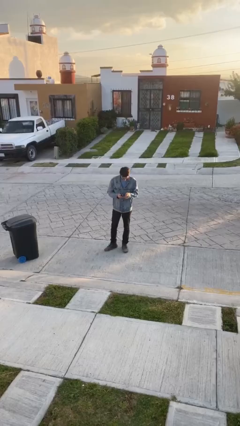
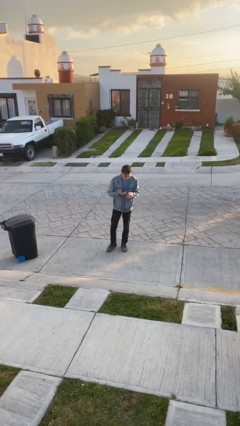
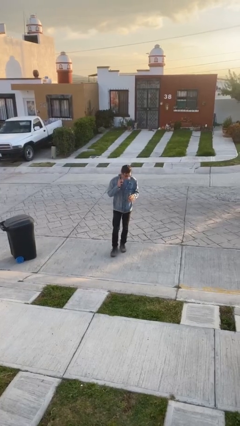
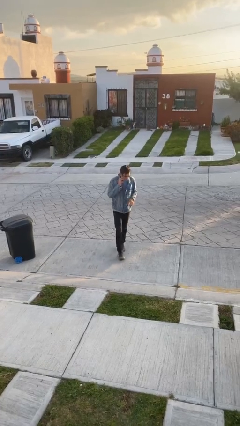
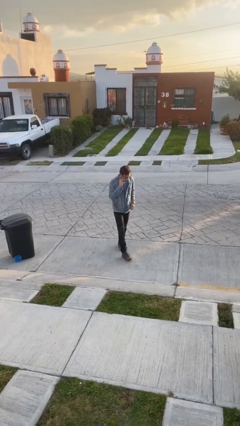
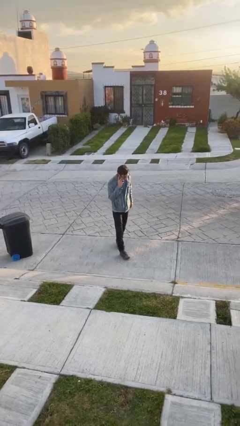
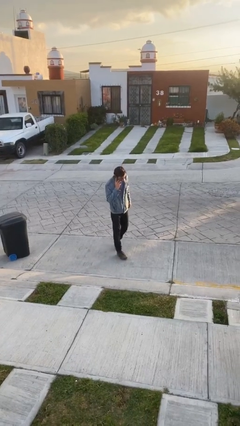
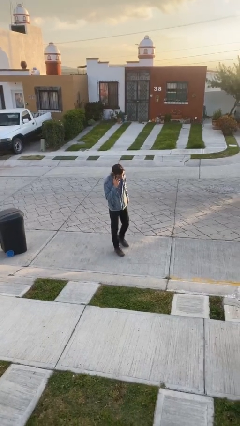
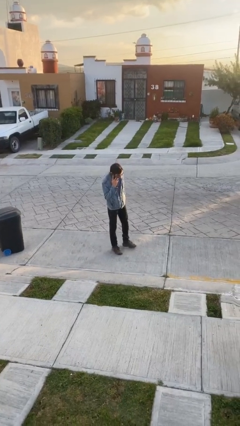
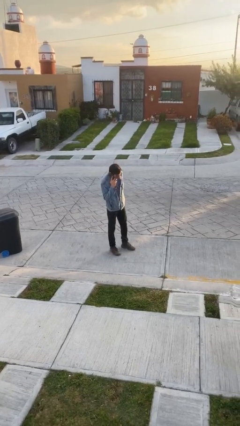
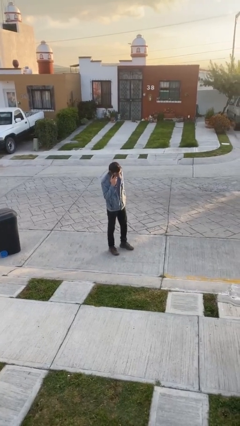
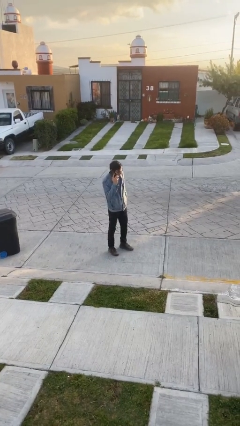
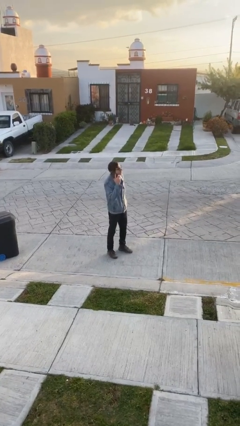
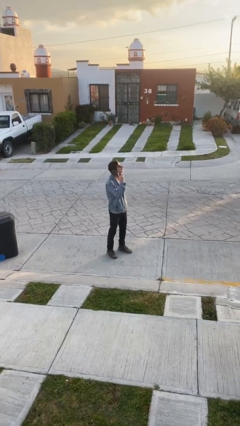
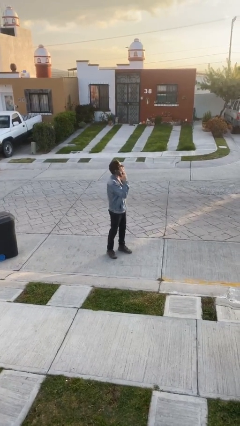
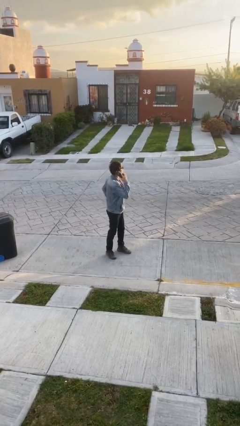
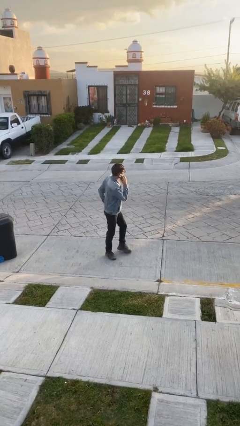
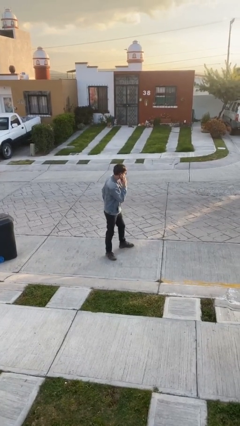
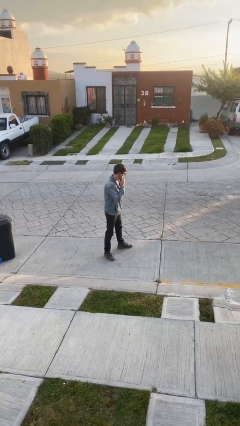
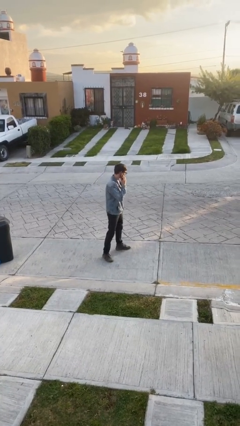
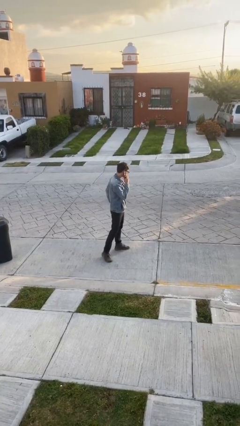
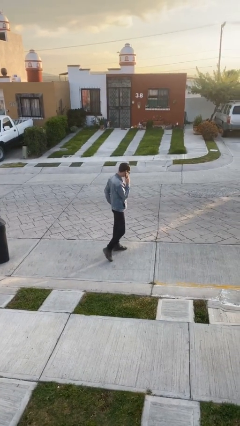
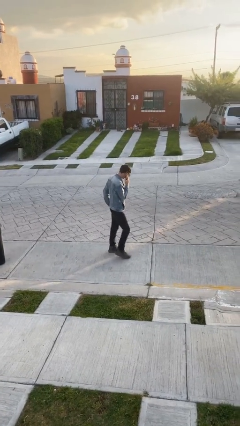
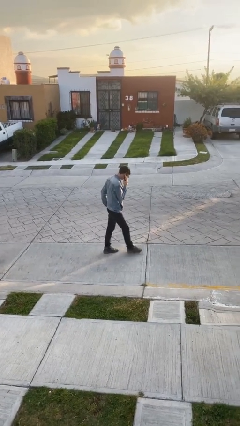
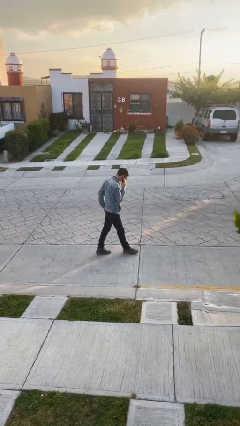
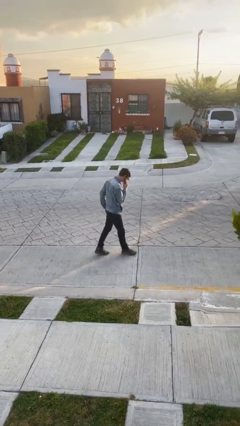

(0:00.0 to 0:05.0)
person talks on phone

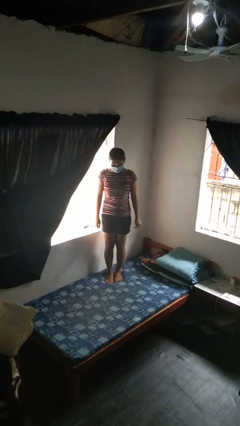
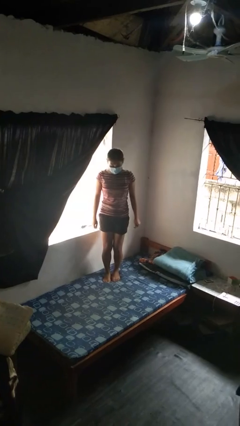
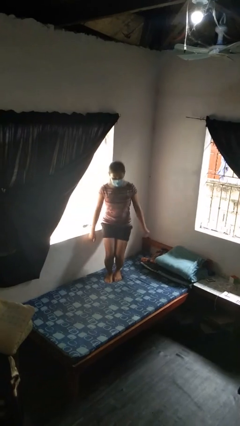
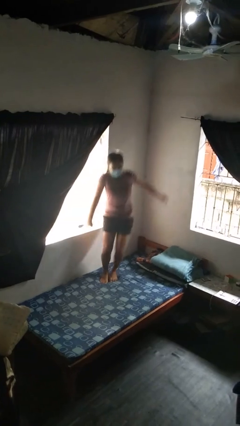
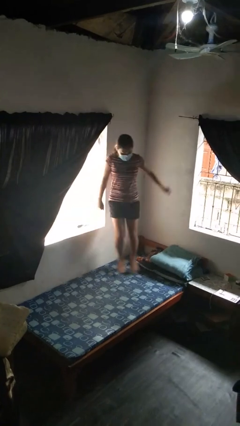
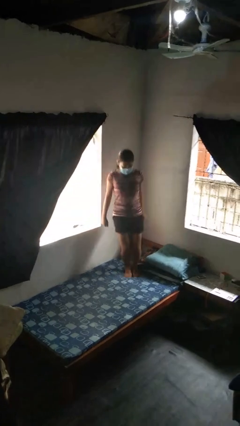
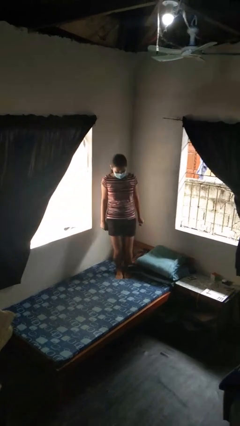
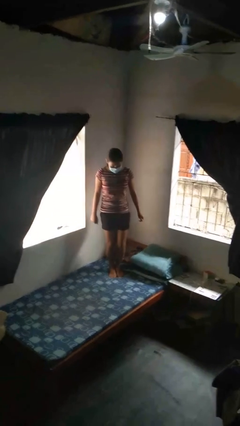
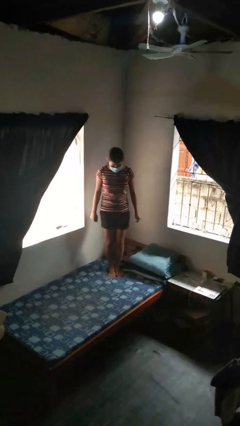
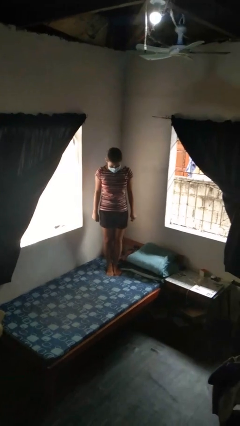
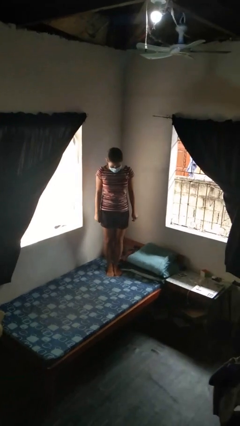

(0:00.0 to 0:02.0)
person jumps on bed

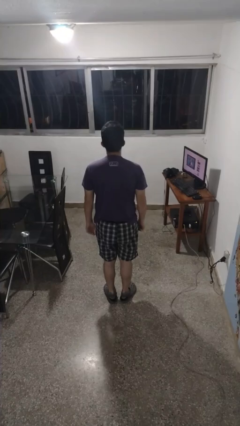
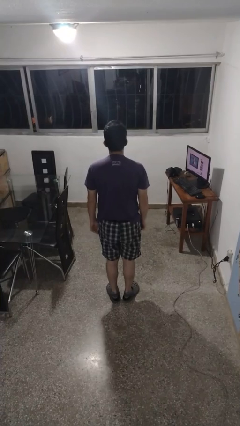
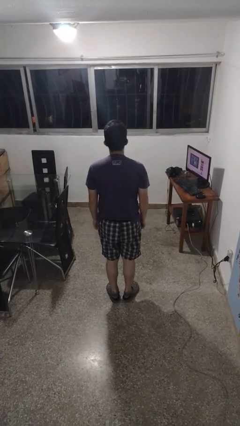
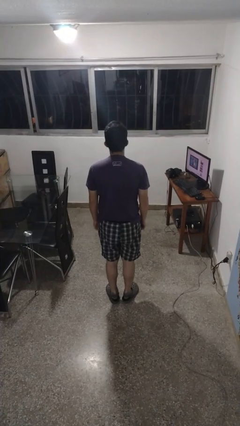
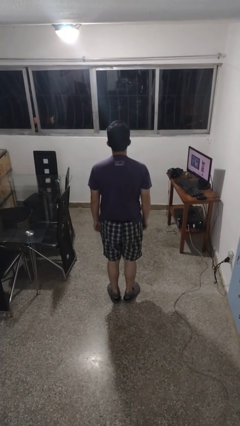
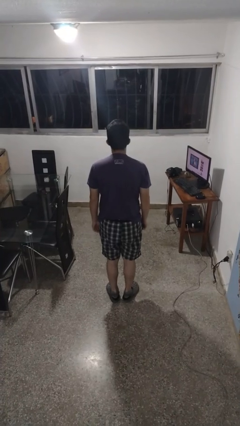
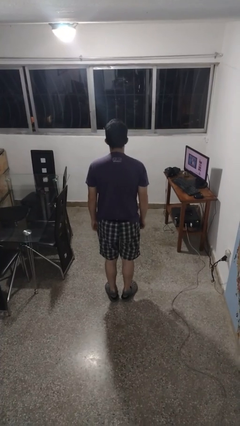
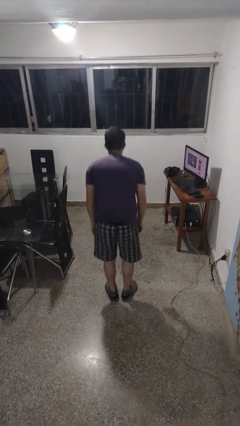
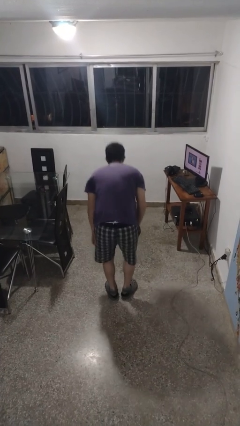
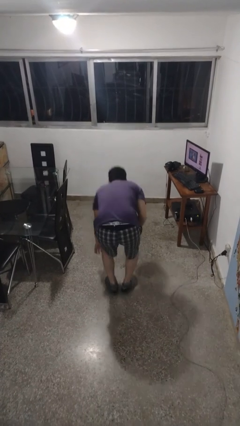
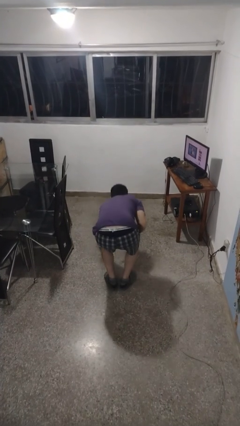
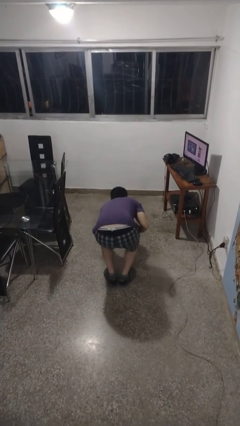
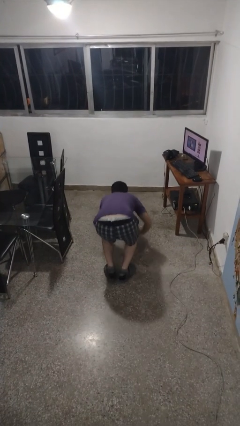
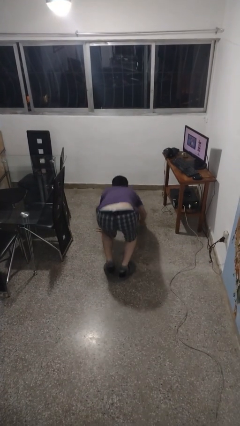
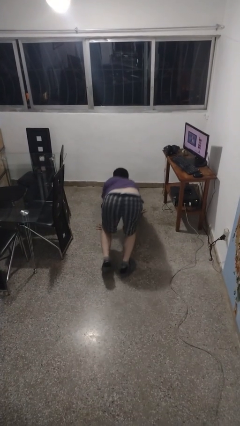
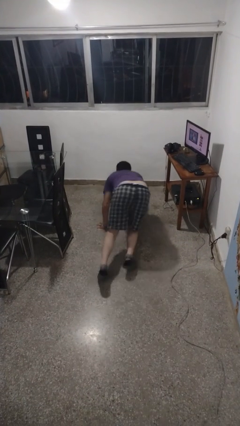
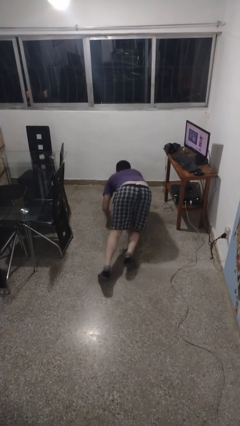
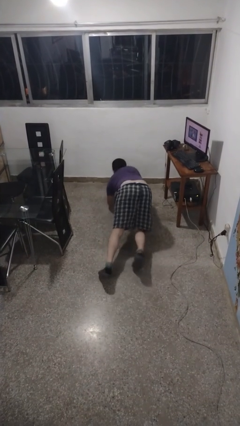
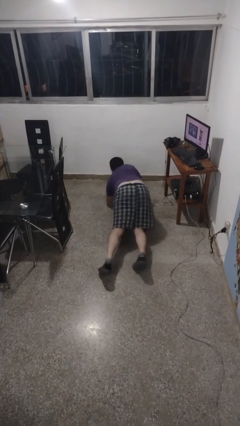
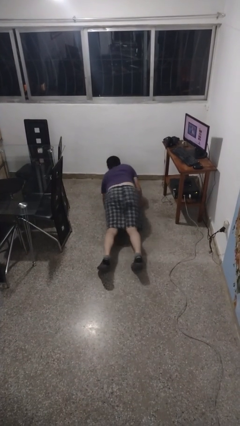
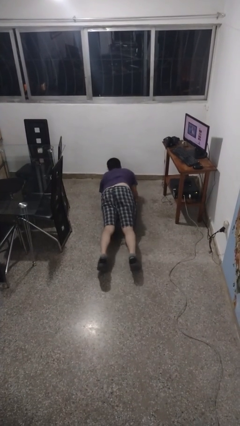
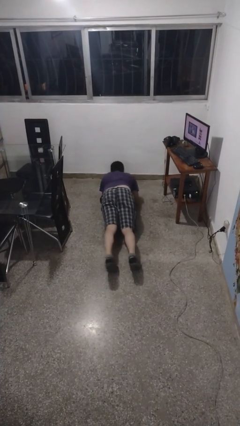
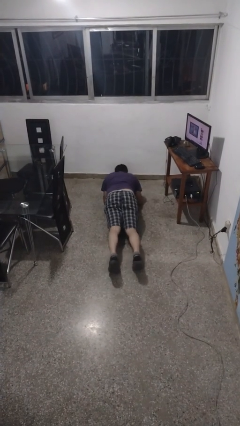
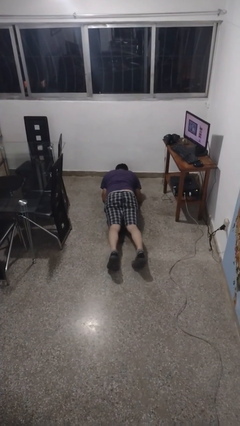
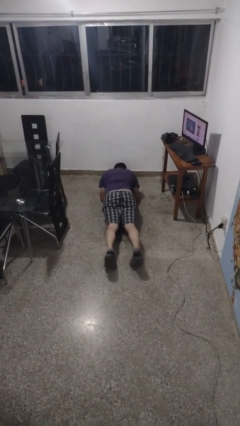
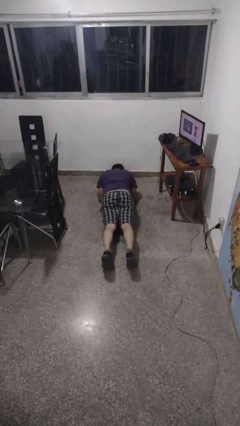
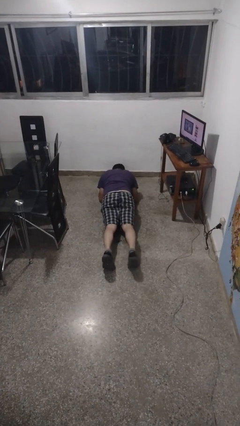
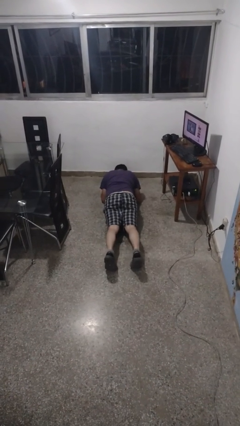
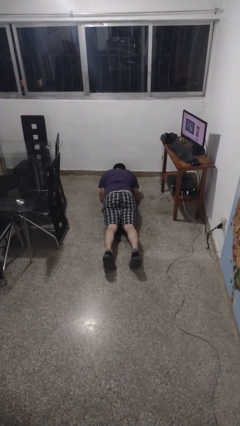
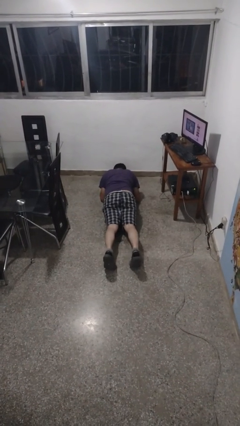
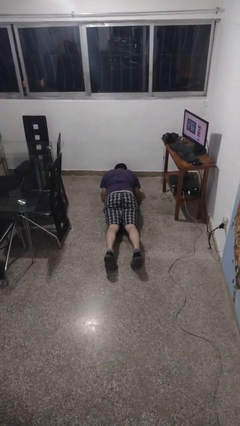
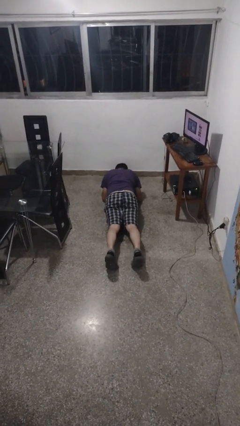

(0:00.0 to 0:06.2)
person exercises with plank

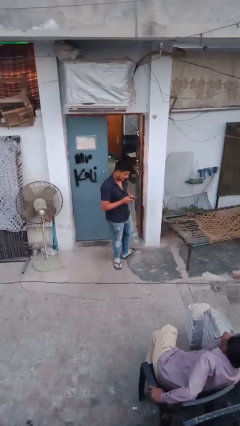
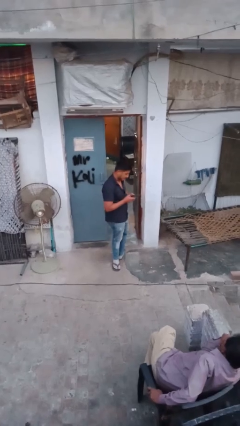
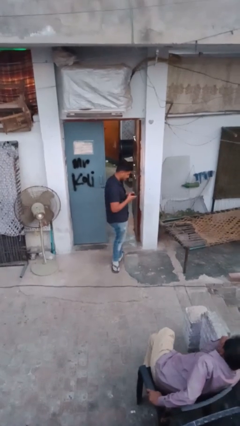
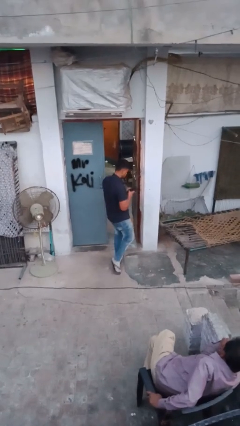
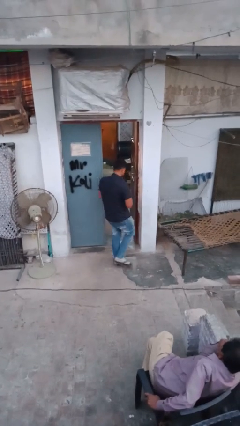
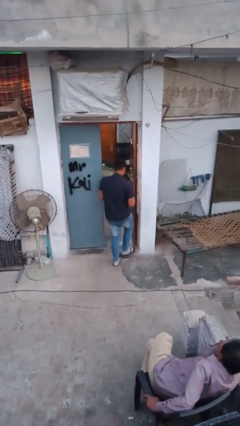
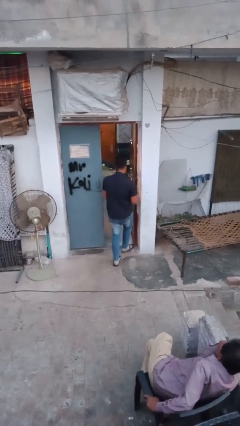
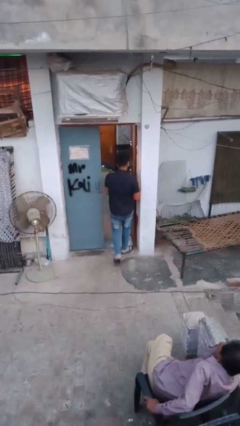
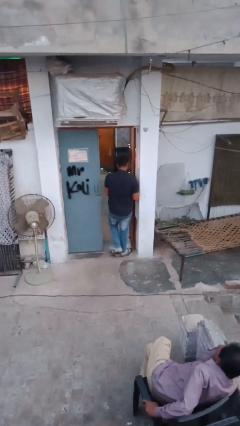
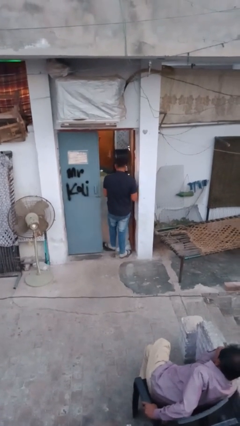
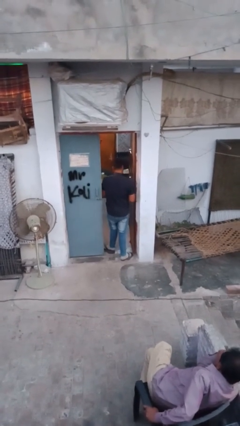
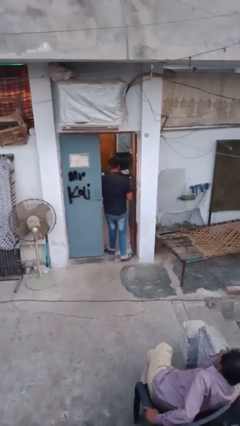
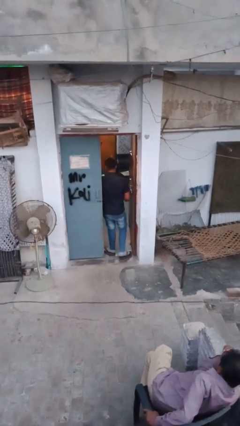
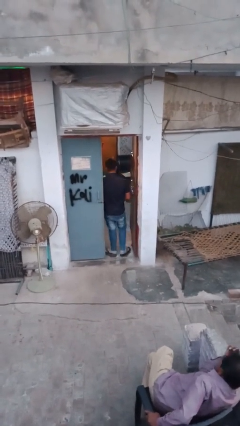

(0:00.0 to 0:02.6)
person exits scene through structure

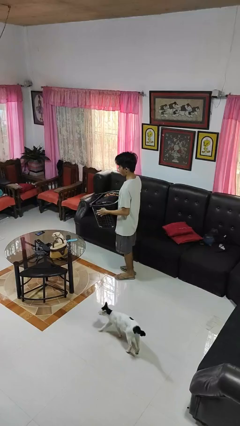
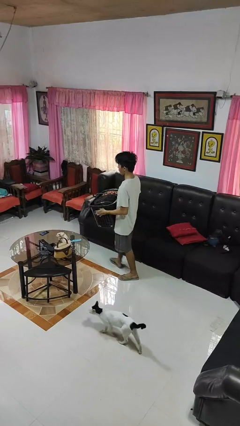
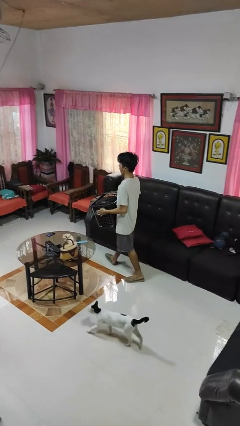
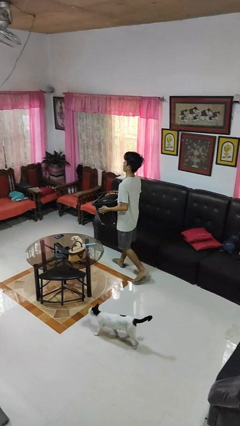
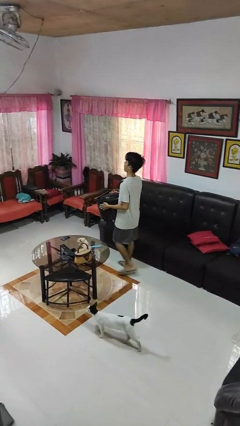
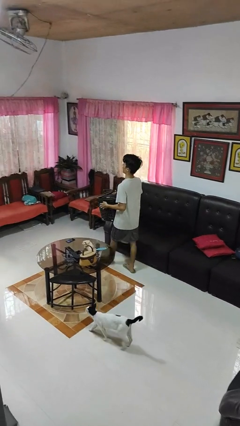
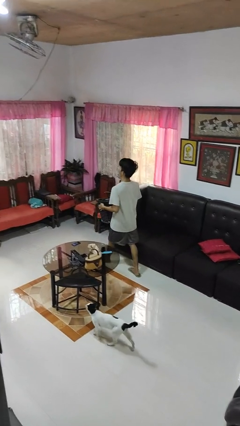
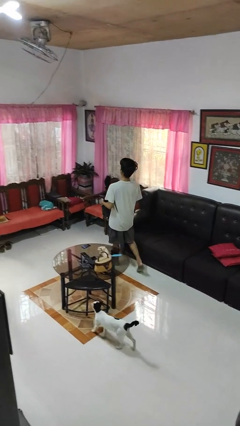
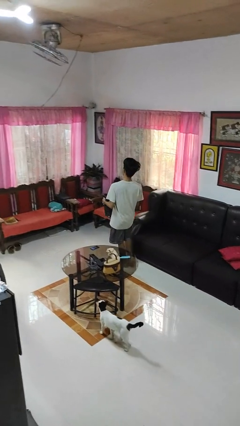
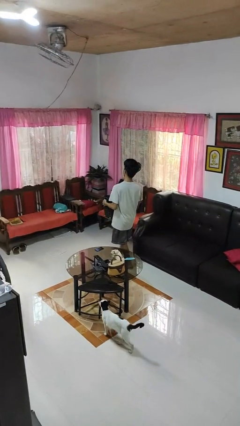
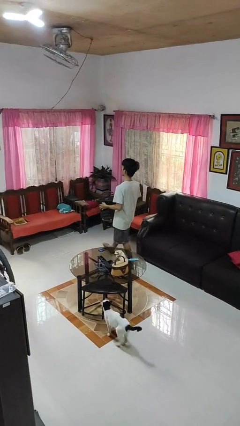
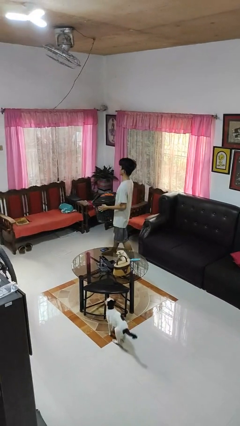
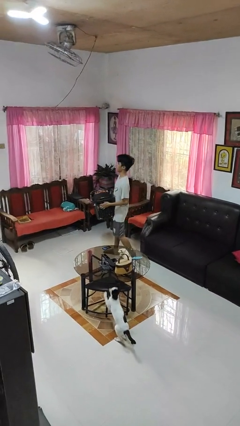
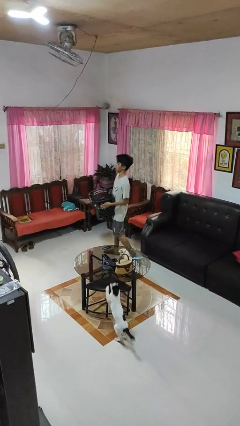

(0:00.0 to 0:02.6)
person carries laundry basket
